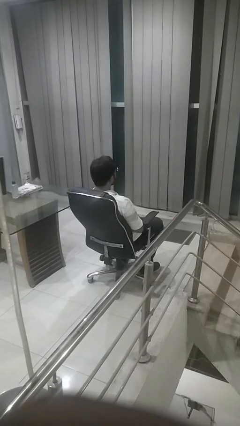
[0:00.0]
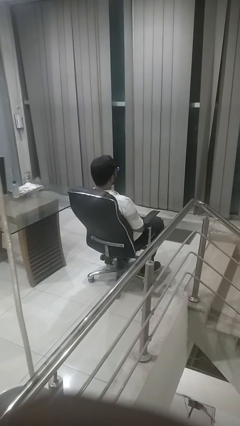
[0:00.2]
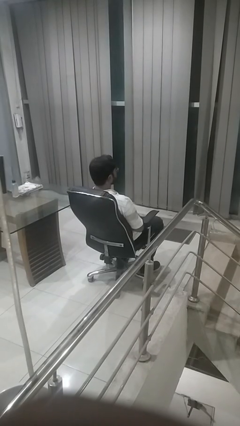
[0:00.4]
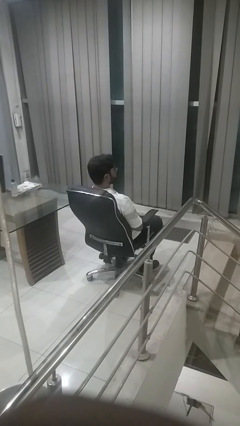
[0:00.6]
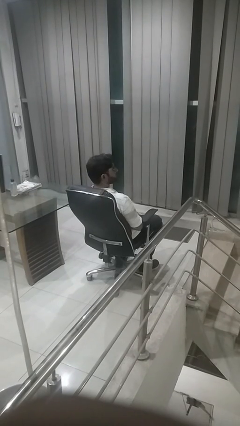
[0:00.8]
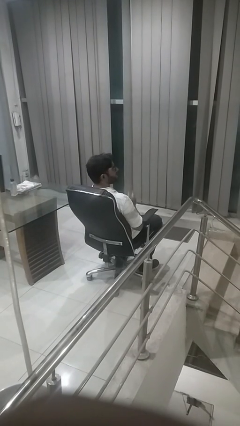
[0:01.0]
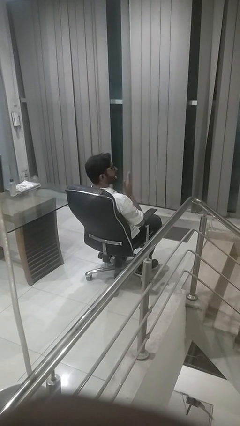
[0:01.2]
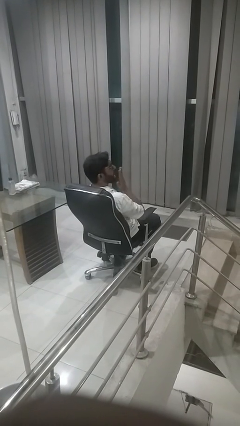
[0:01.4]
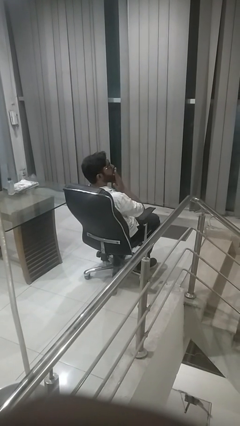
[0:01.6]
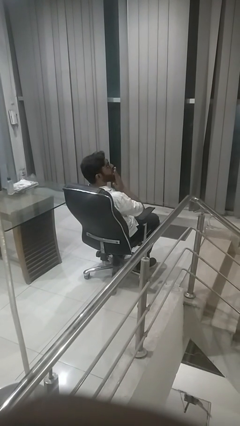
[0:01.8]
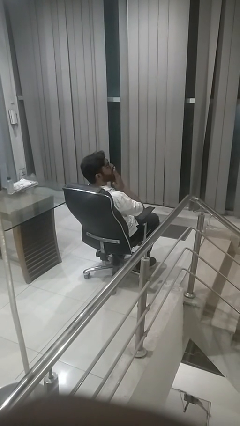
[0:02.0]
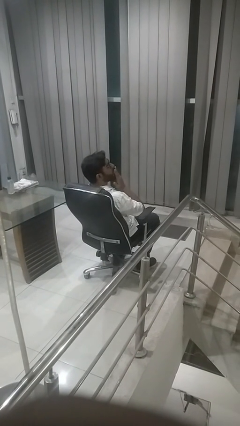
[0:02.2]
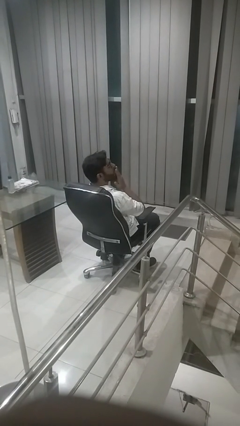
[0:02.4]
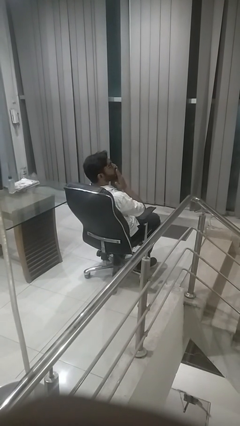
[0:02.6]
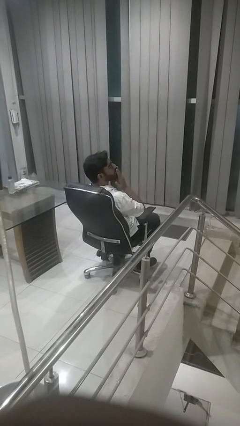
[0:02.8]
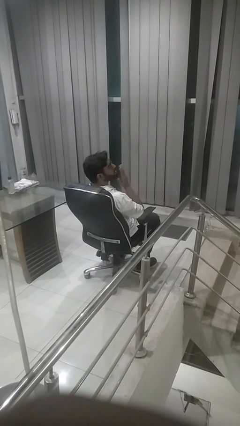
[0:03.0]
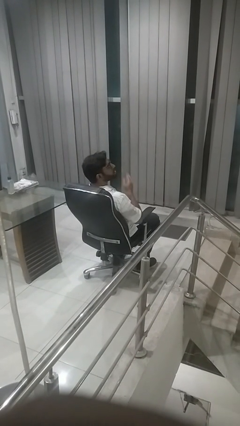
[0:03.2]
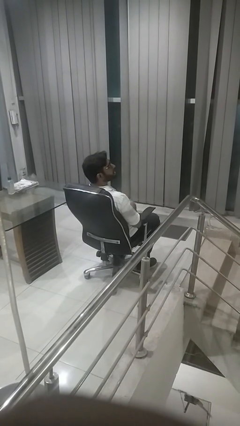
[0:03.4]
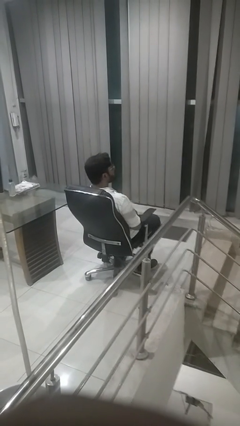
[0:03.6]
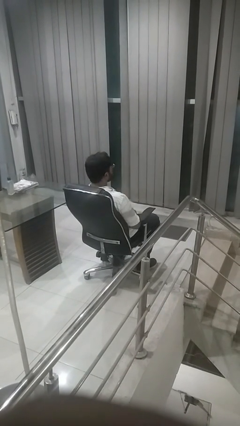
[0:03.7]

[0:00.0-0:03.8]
person yawns

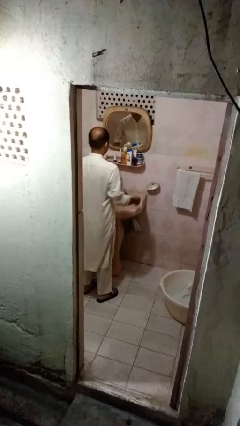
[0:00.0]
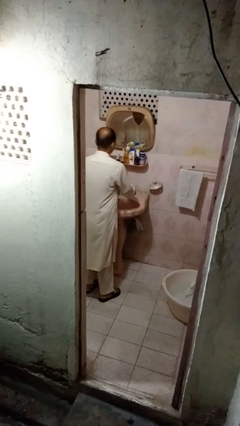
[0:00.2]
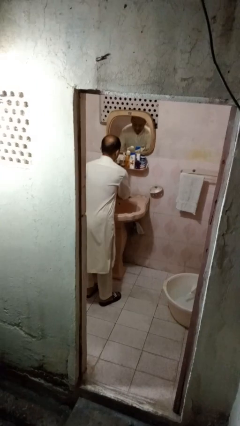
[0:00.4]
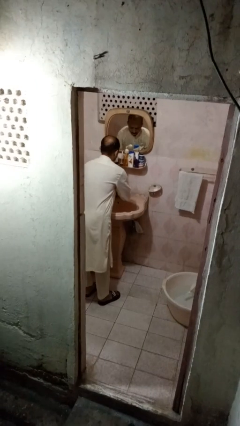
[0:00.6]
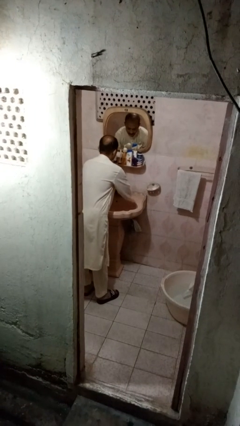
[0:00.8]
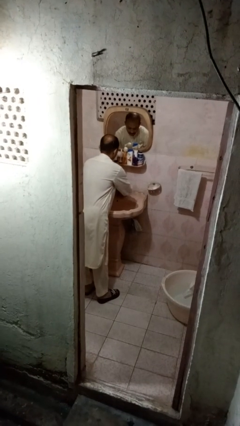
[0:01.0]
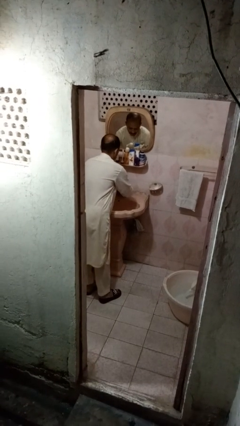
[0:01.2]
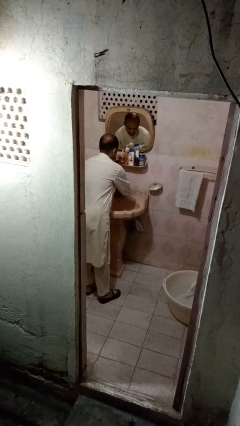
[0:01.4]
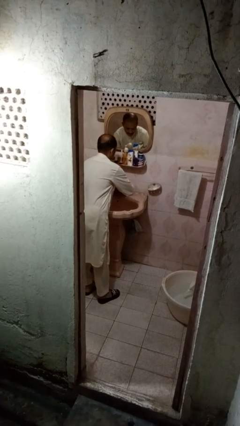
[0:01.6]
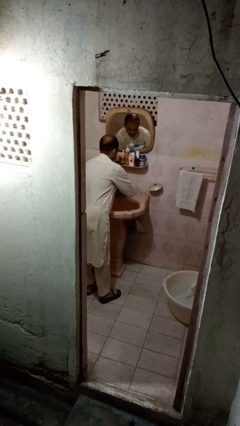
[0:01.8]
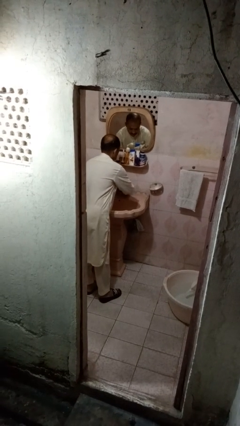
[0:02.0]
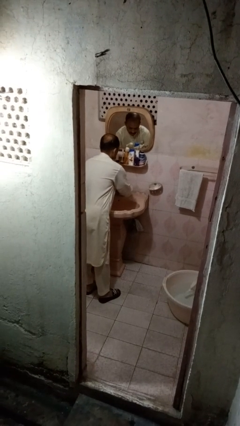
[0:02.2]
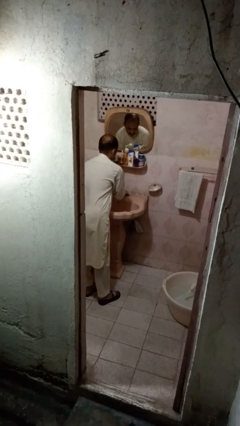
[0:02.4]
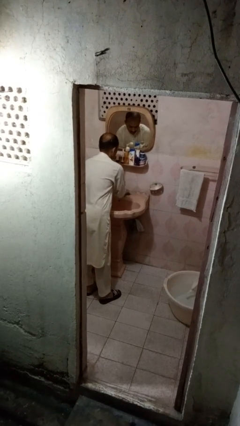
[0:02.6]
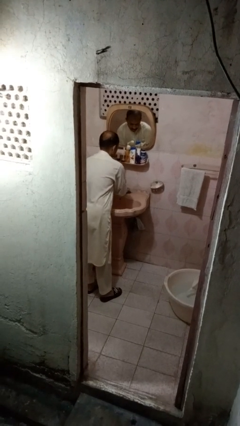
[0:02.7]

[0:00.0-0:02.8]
person washes hands

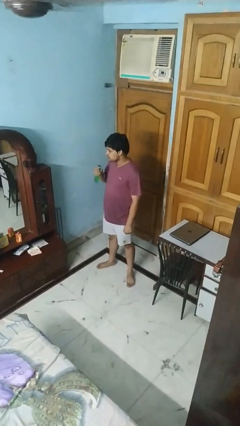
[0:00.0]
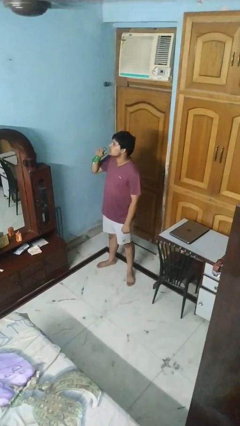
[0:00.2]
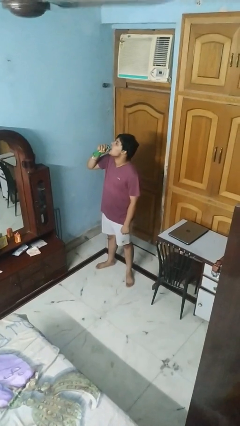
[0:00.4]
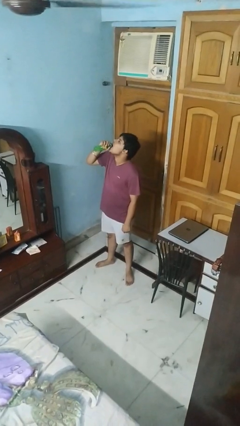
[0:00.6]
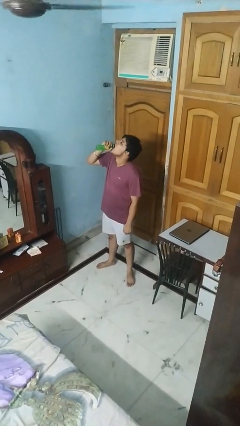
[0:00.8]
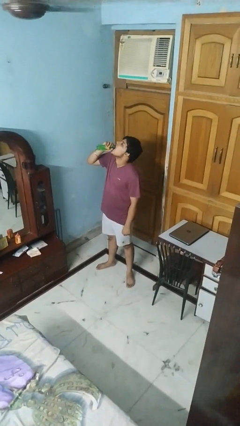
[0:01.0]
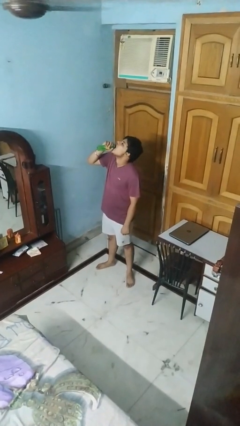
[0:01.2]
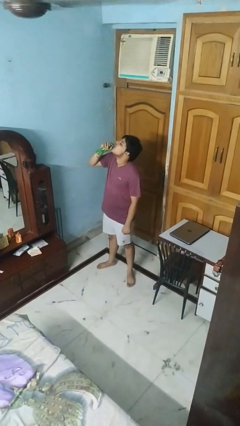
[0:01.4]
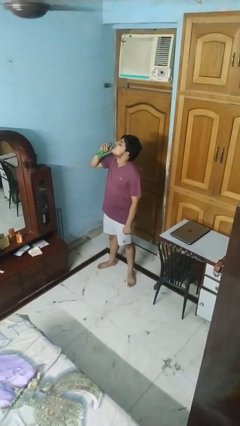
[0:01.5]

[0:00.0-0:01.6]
person drinks from bottle

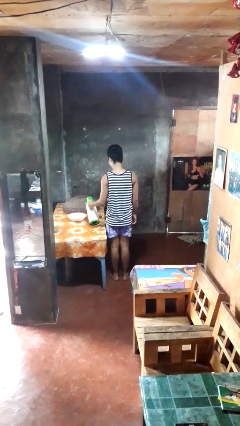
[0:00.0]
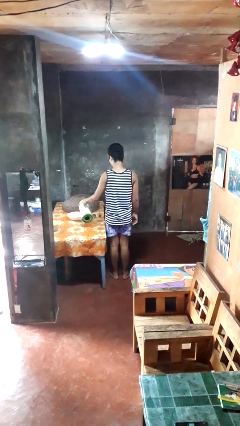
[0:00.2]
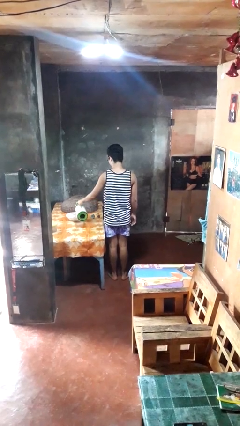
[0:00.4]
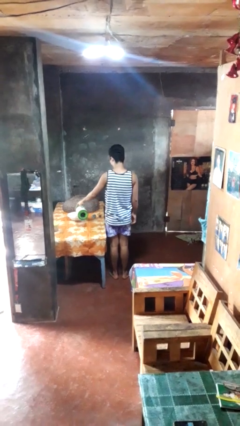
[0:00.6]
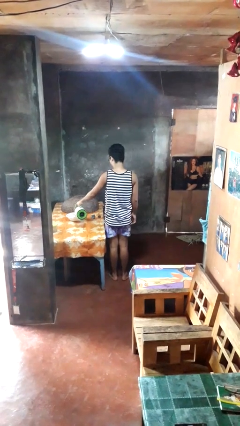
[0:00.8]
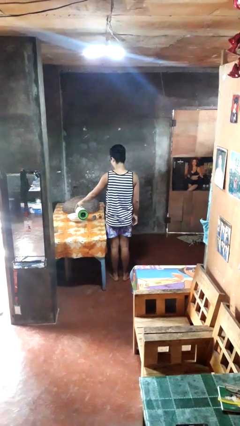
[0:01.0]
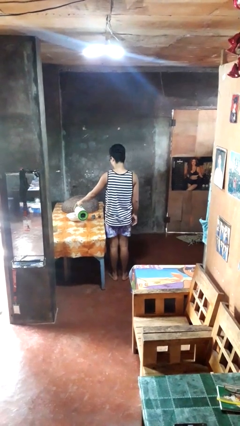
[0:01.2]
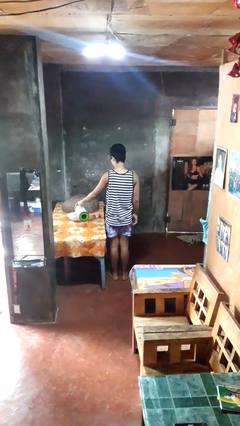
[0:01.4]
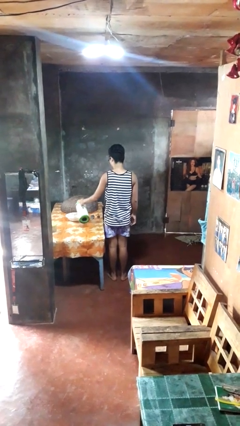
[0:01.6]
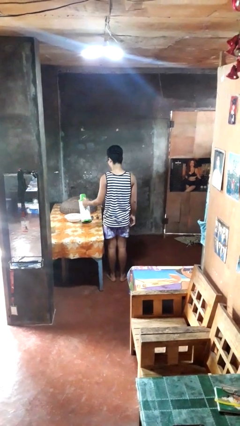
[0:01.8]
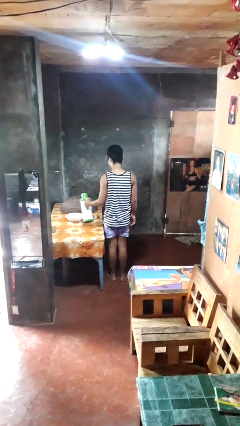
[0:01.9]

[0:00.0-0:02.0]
person pours into bowl

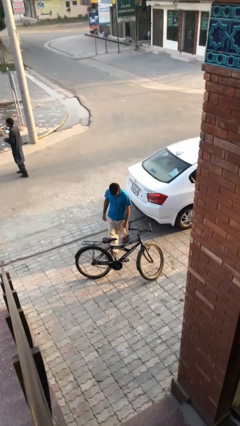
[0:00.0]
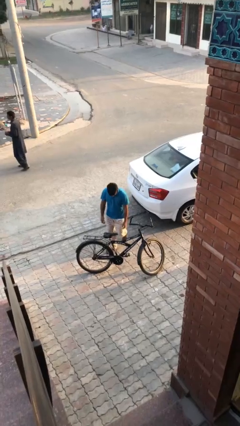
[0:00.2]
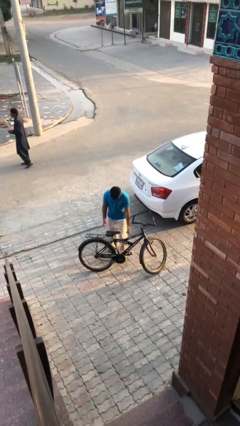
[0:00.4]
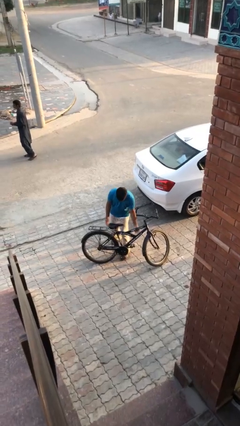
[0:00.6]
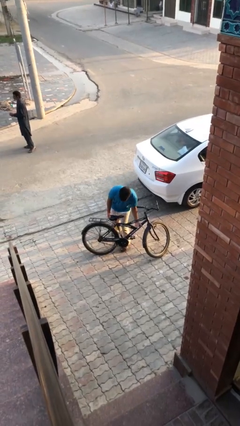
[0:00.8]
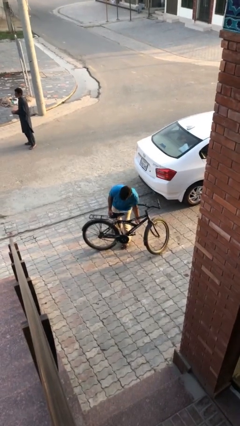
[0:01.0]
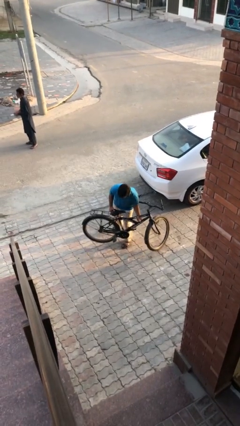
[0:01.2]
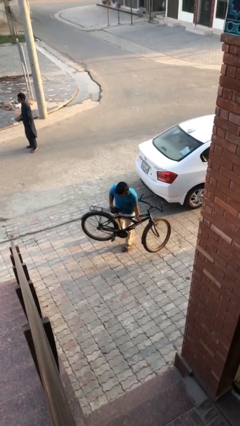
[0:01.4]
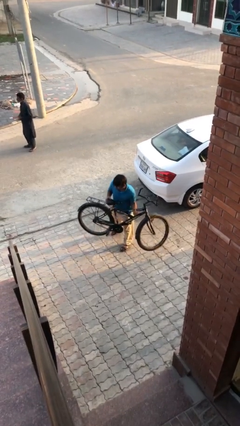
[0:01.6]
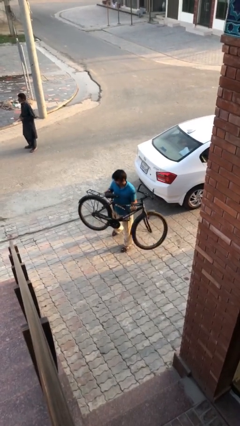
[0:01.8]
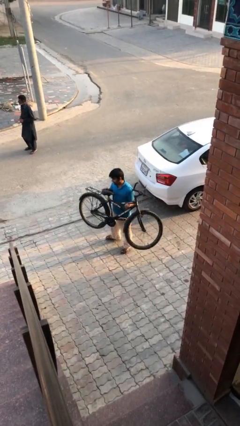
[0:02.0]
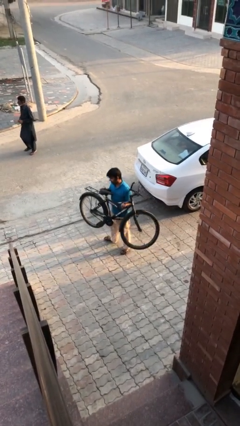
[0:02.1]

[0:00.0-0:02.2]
person picks up object from floor

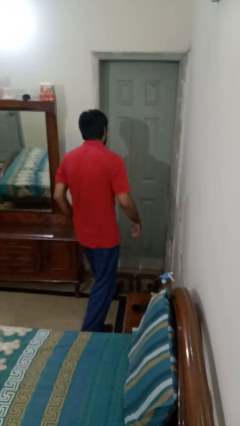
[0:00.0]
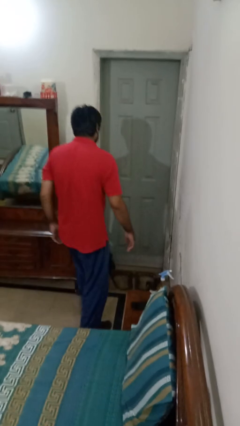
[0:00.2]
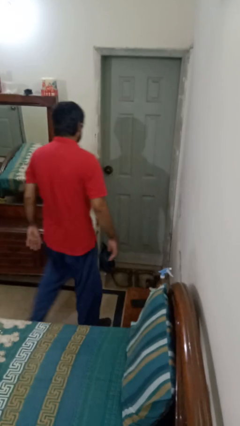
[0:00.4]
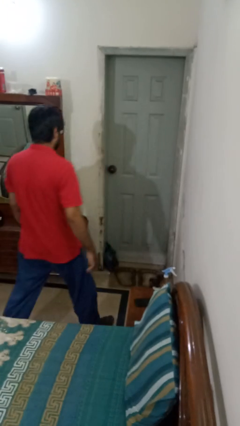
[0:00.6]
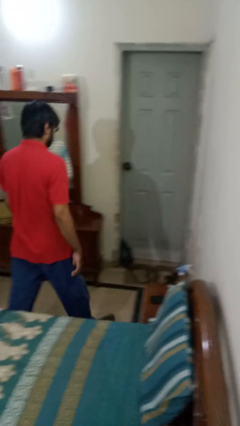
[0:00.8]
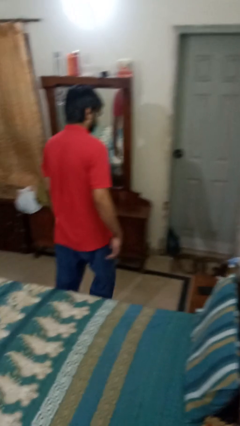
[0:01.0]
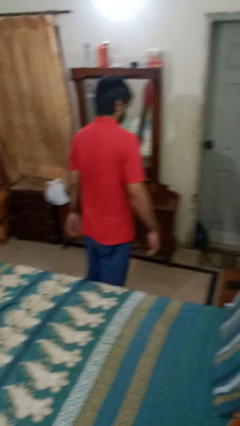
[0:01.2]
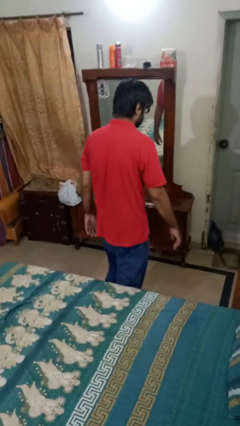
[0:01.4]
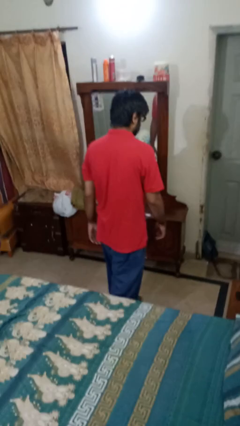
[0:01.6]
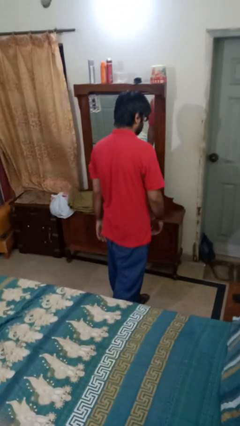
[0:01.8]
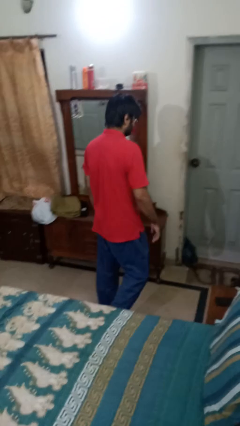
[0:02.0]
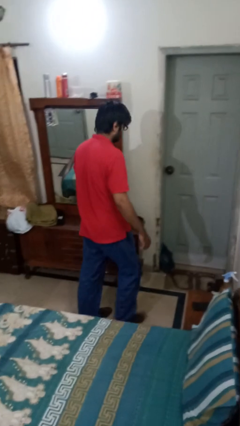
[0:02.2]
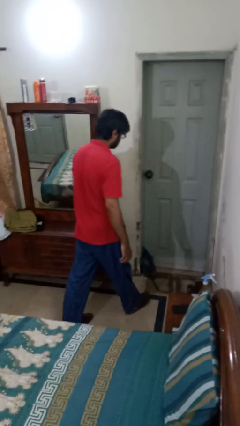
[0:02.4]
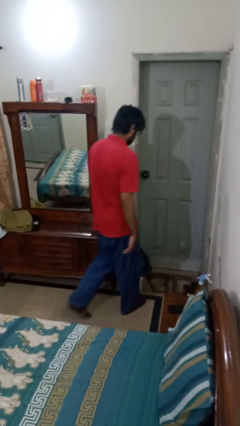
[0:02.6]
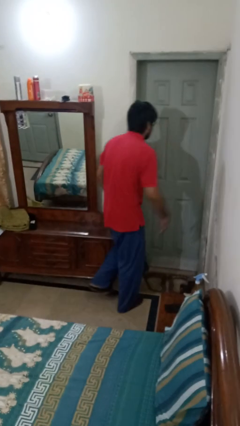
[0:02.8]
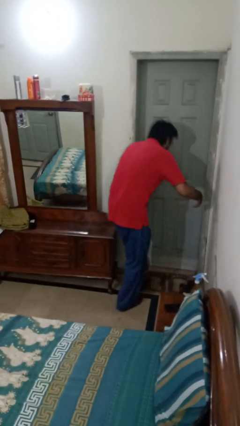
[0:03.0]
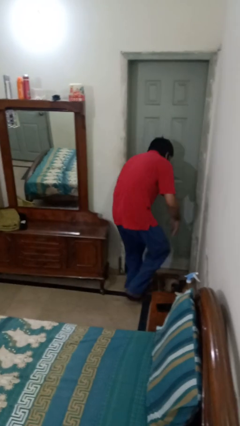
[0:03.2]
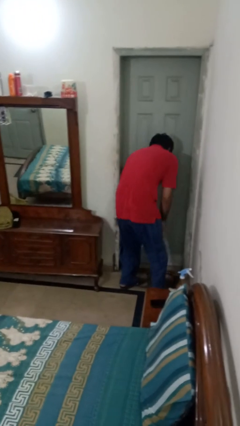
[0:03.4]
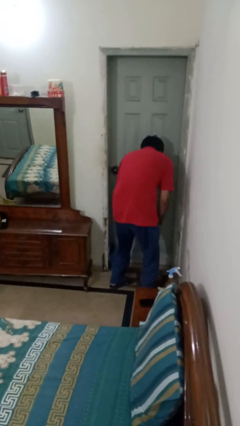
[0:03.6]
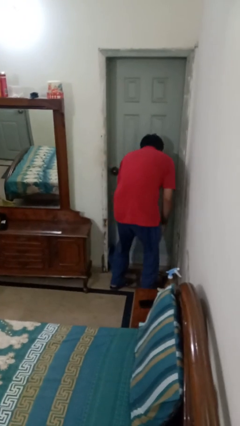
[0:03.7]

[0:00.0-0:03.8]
person bumps into table

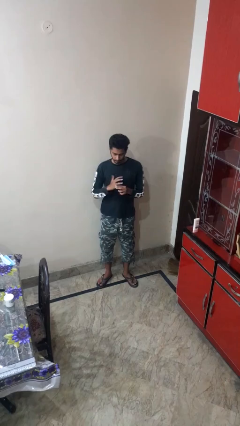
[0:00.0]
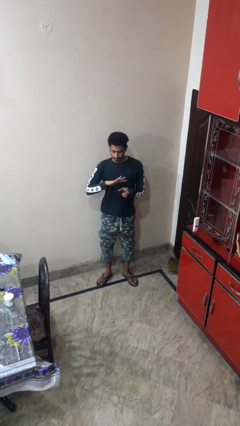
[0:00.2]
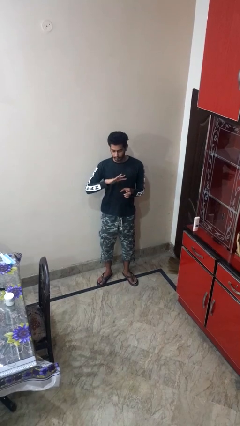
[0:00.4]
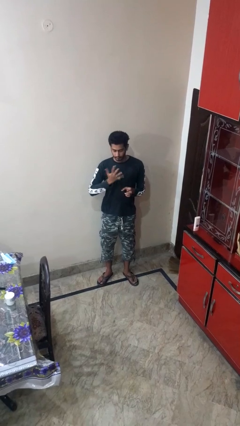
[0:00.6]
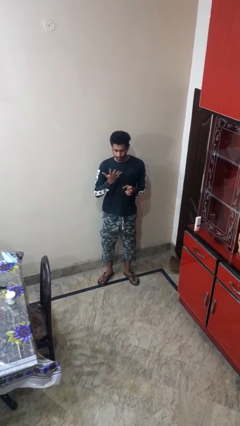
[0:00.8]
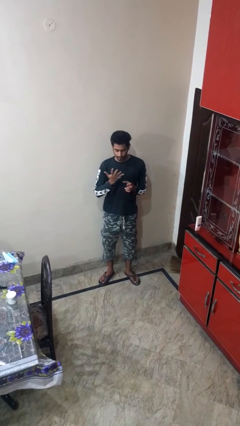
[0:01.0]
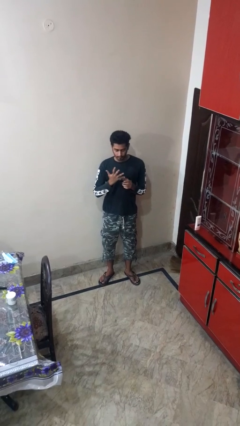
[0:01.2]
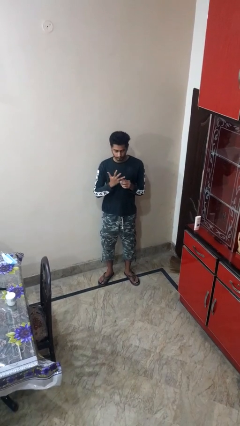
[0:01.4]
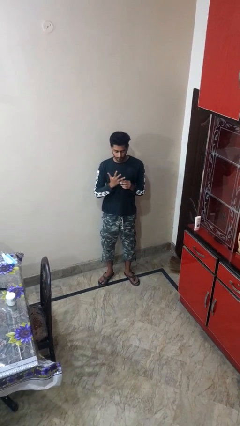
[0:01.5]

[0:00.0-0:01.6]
person puts on ring
